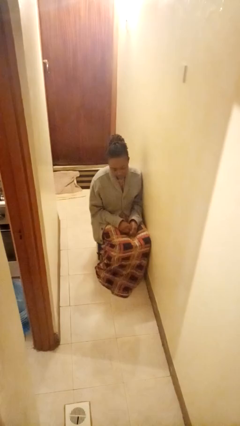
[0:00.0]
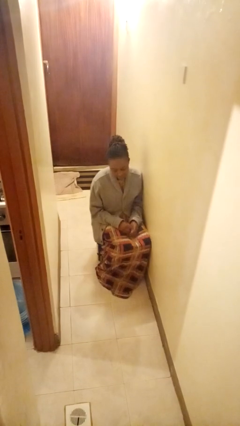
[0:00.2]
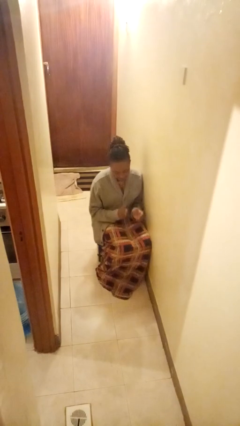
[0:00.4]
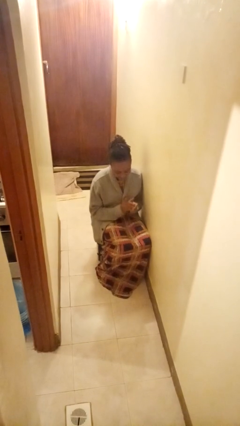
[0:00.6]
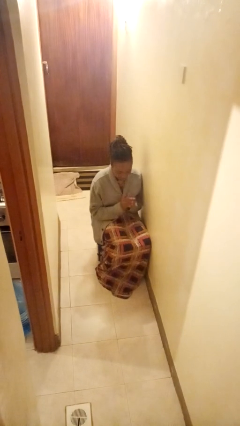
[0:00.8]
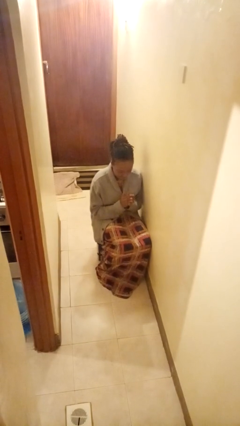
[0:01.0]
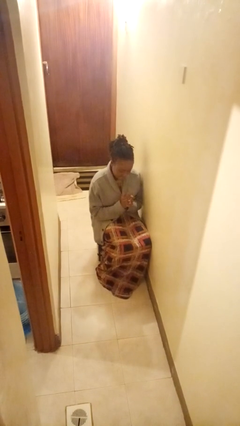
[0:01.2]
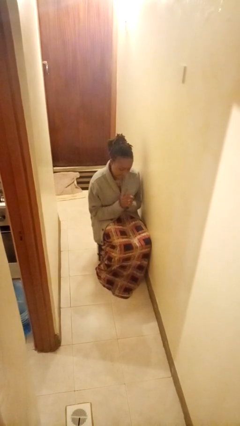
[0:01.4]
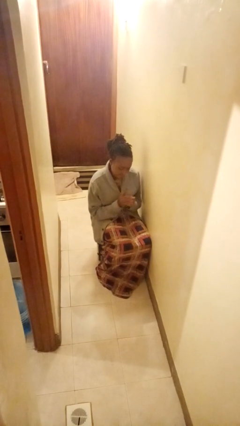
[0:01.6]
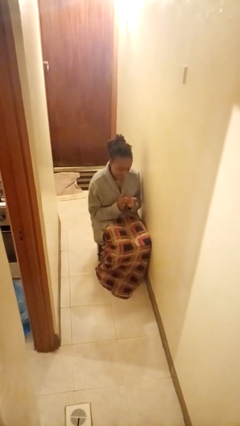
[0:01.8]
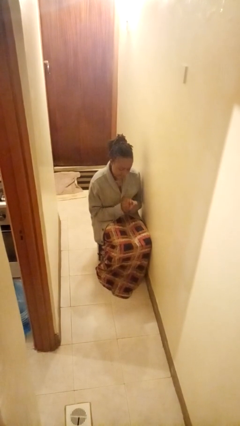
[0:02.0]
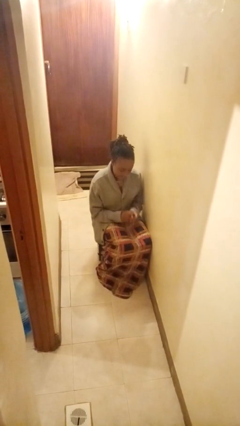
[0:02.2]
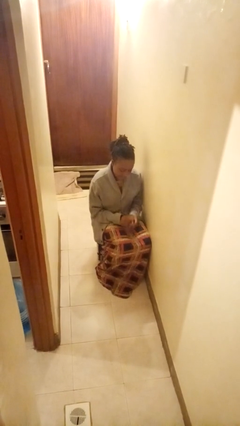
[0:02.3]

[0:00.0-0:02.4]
person claps hands

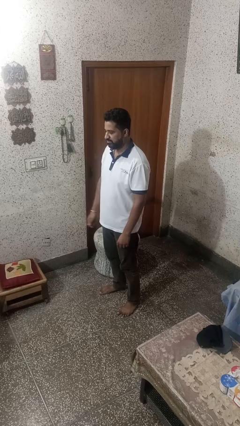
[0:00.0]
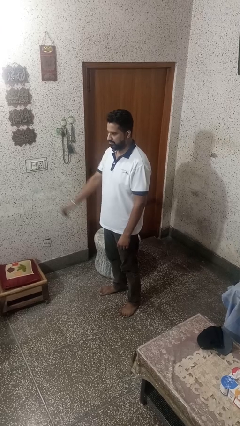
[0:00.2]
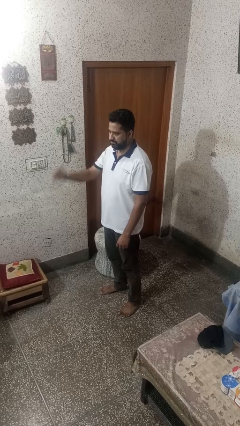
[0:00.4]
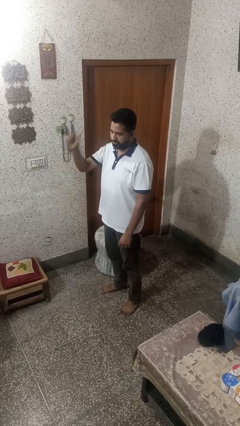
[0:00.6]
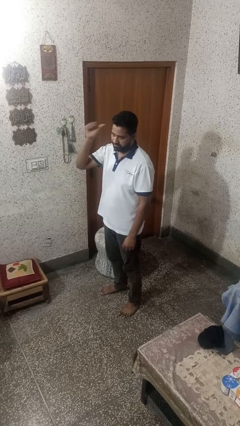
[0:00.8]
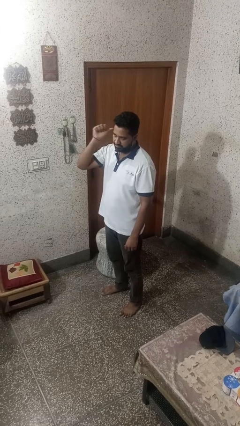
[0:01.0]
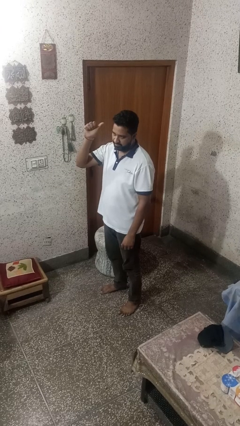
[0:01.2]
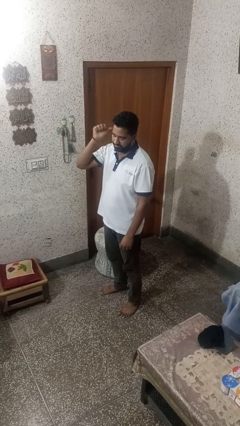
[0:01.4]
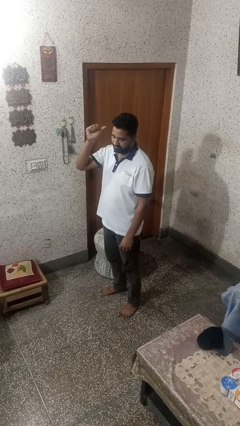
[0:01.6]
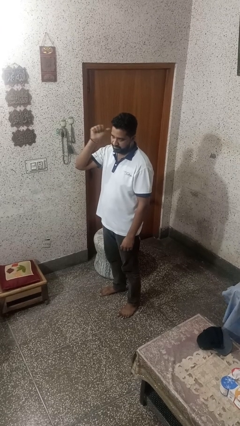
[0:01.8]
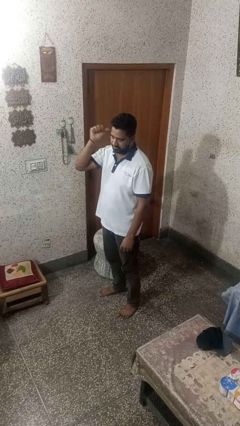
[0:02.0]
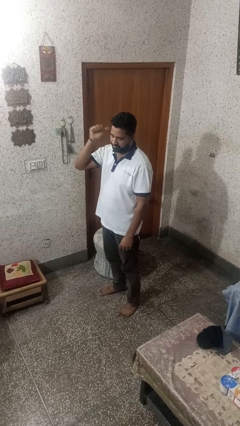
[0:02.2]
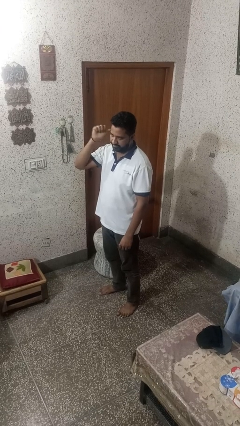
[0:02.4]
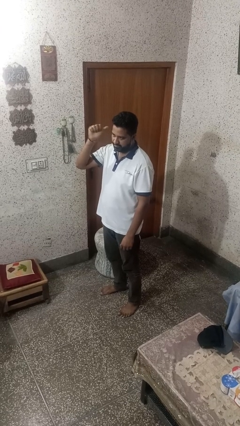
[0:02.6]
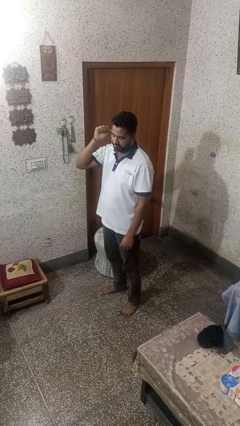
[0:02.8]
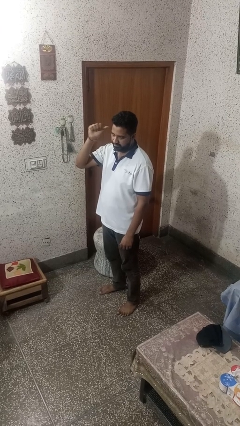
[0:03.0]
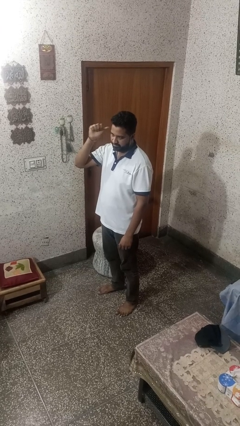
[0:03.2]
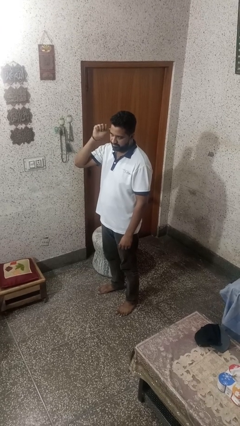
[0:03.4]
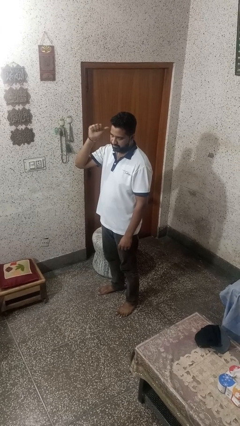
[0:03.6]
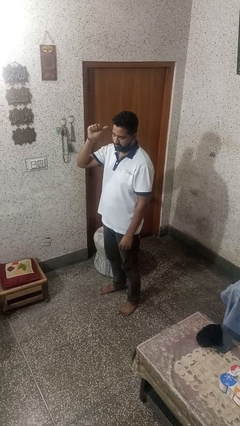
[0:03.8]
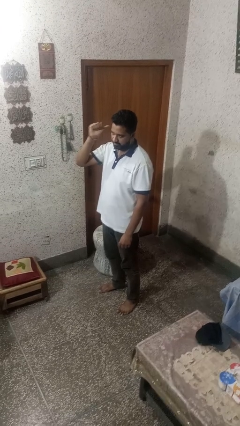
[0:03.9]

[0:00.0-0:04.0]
person gestures behind me

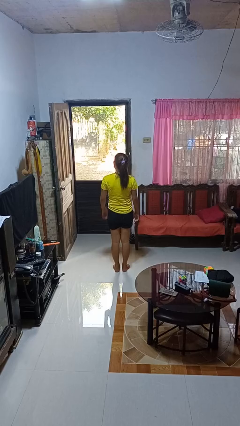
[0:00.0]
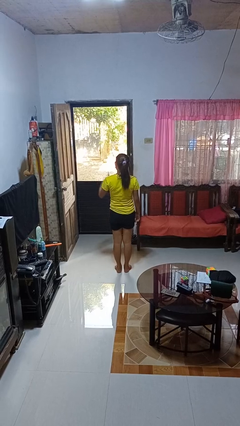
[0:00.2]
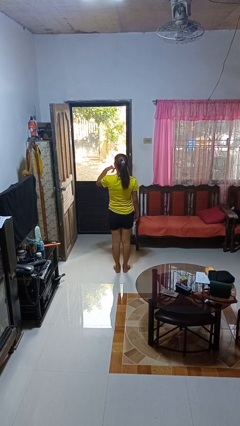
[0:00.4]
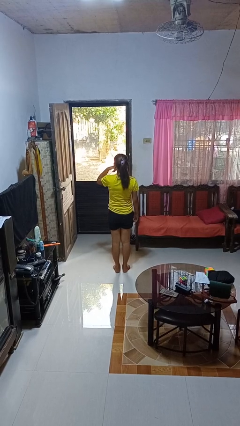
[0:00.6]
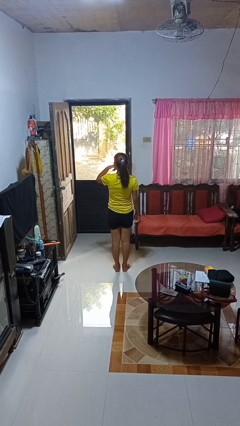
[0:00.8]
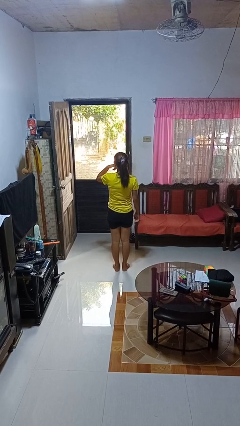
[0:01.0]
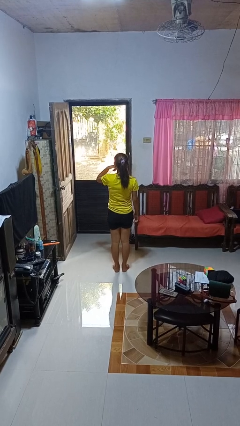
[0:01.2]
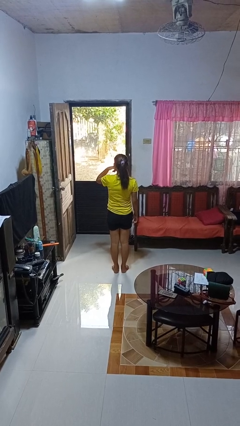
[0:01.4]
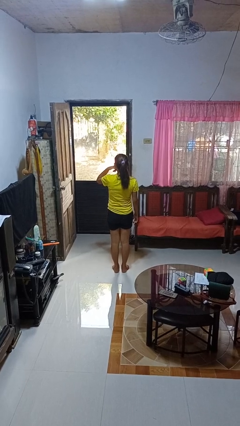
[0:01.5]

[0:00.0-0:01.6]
person gestures call me

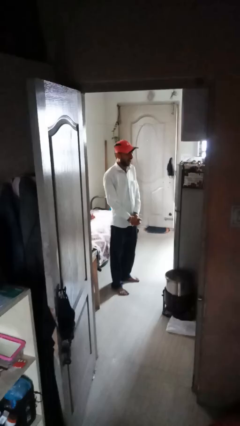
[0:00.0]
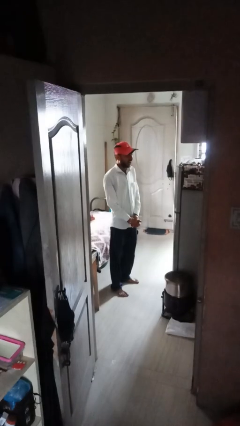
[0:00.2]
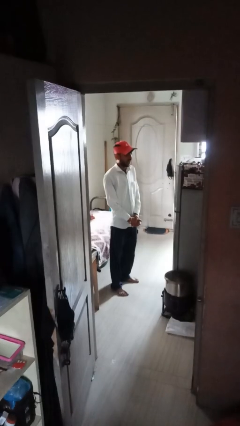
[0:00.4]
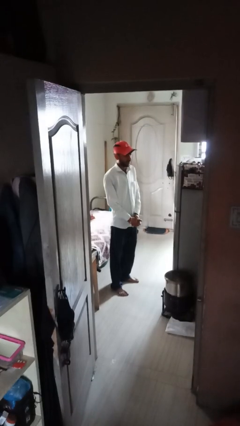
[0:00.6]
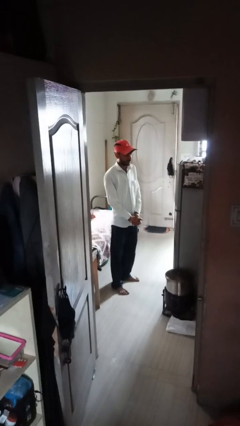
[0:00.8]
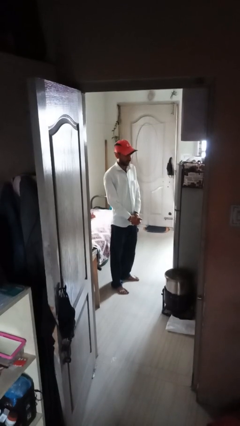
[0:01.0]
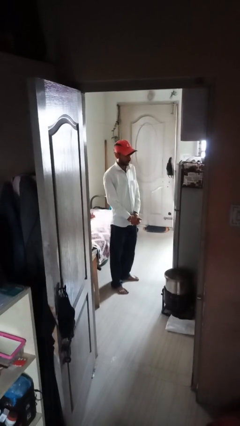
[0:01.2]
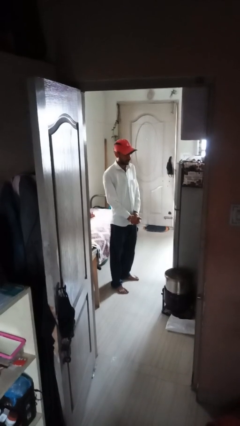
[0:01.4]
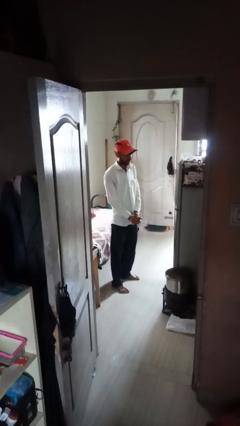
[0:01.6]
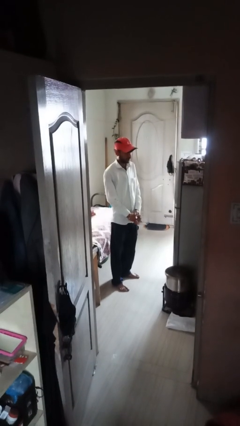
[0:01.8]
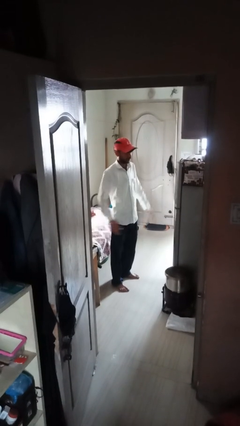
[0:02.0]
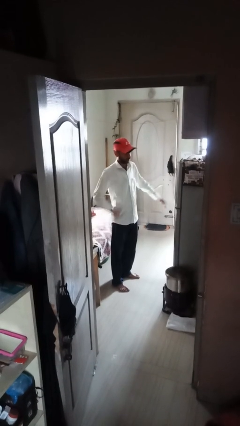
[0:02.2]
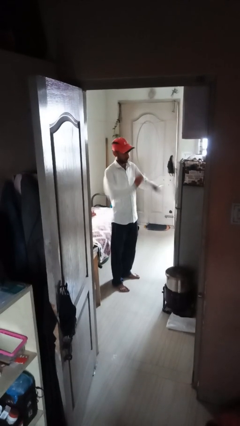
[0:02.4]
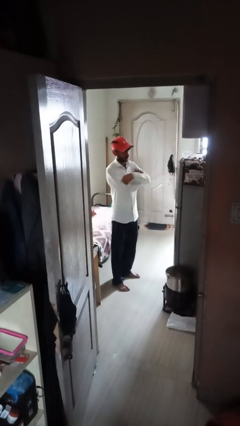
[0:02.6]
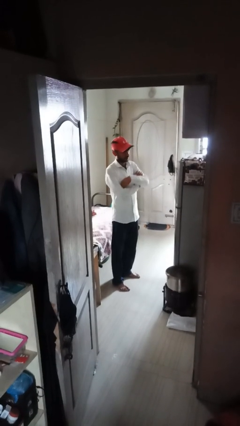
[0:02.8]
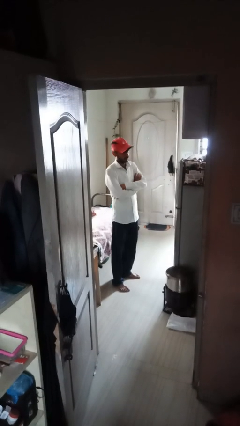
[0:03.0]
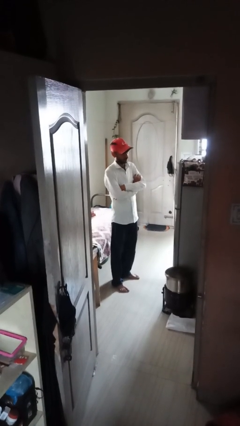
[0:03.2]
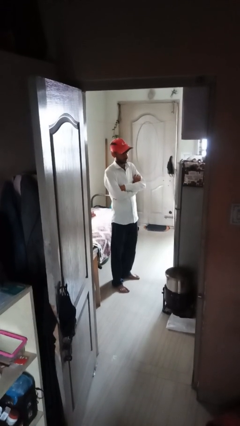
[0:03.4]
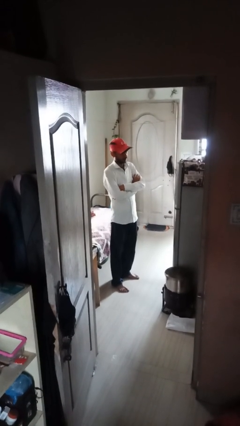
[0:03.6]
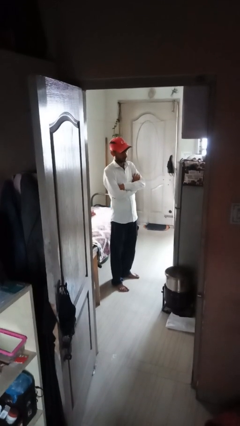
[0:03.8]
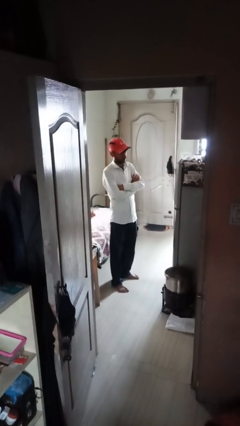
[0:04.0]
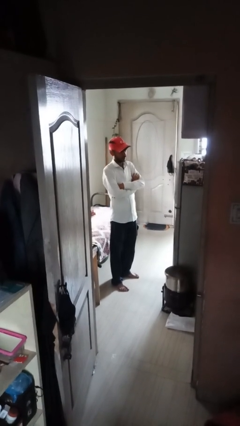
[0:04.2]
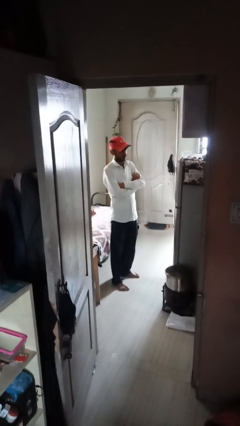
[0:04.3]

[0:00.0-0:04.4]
person crosses arms

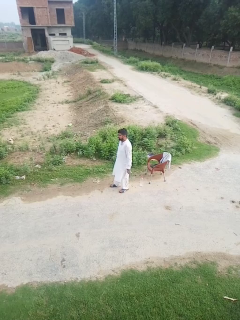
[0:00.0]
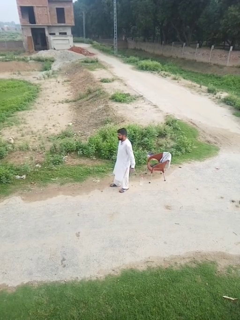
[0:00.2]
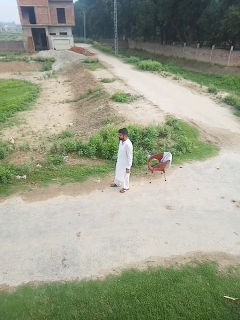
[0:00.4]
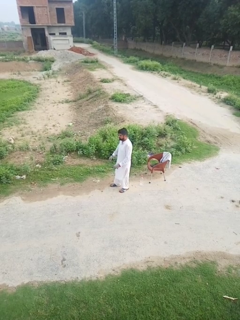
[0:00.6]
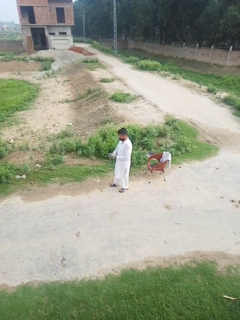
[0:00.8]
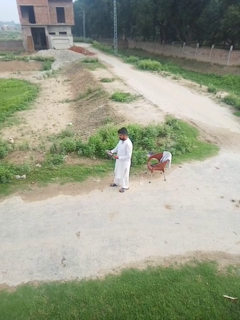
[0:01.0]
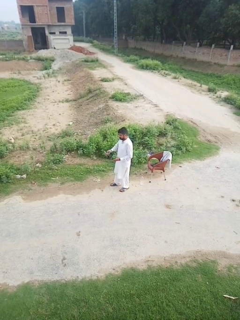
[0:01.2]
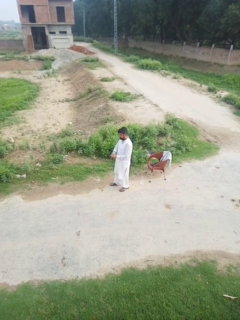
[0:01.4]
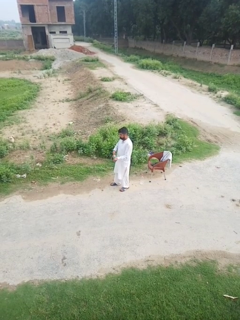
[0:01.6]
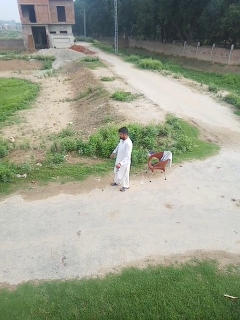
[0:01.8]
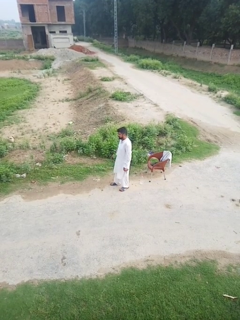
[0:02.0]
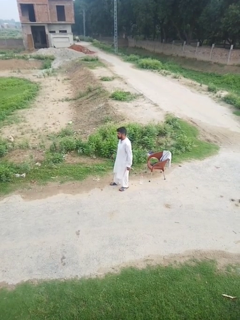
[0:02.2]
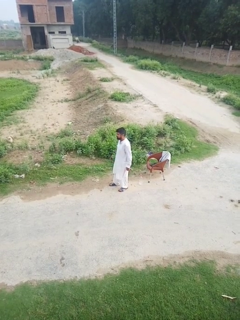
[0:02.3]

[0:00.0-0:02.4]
person takes off gloves

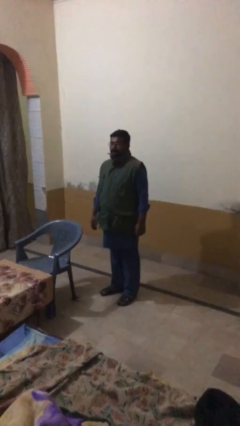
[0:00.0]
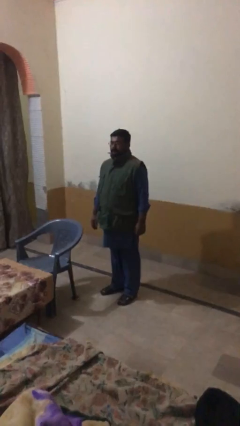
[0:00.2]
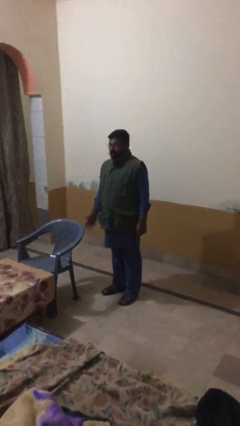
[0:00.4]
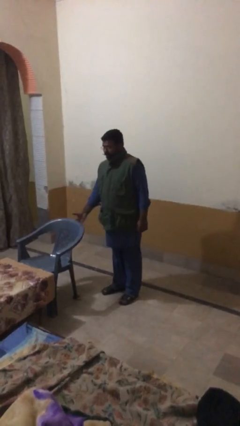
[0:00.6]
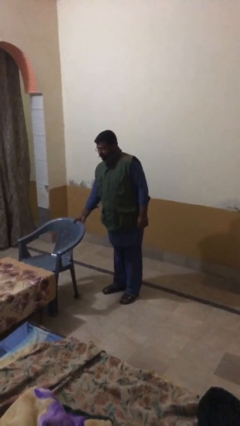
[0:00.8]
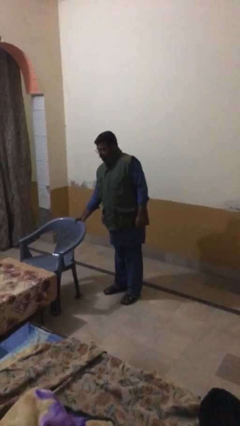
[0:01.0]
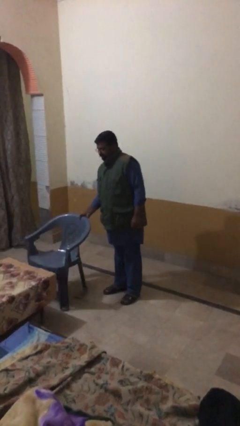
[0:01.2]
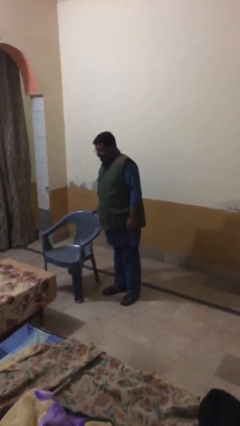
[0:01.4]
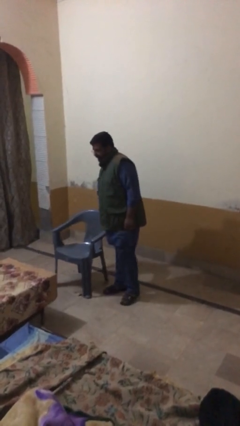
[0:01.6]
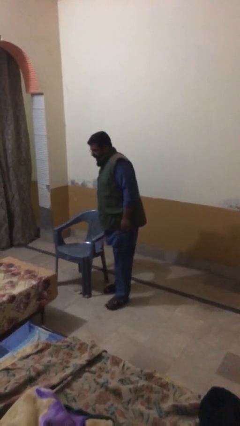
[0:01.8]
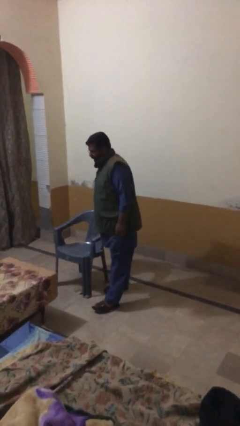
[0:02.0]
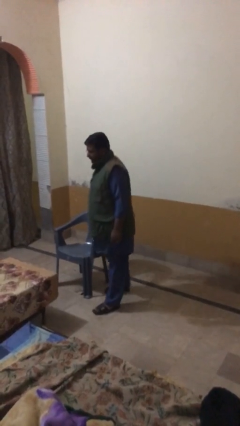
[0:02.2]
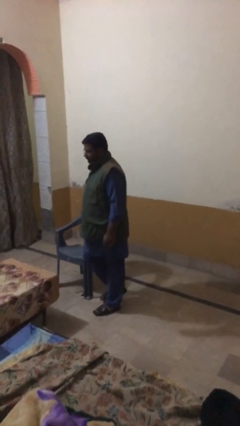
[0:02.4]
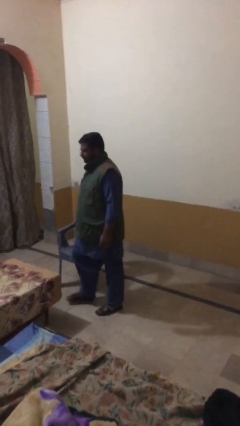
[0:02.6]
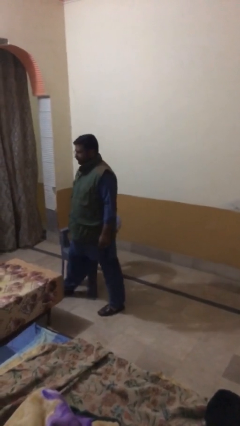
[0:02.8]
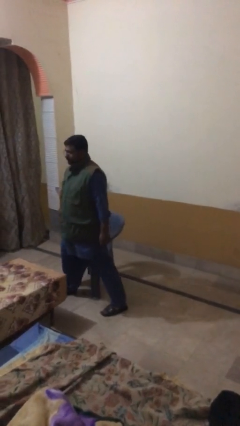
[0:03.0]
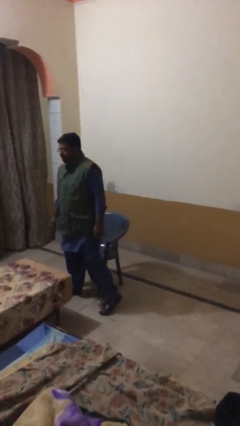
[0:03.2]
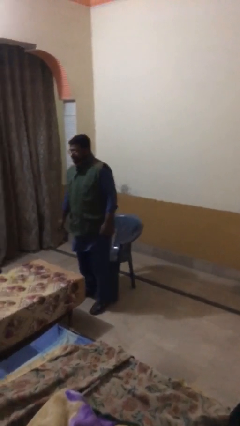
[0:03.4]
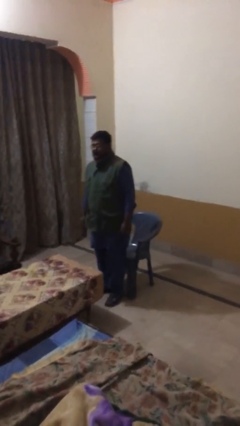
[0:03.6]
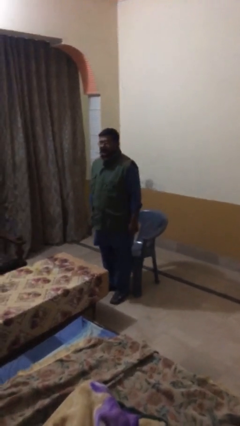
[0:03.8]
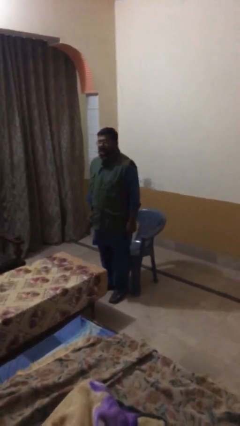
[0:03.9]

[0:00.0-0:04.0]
person stands up
